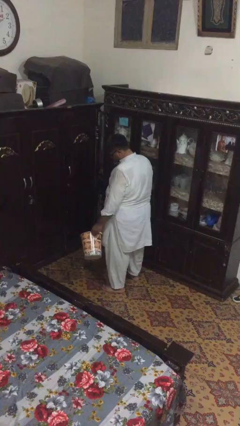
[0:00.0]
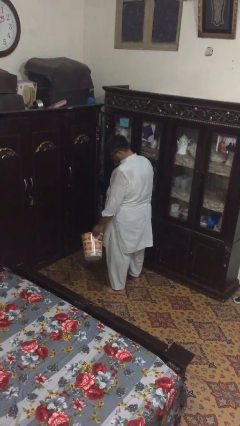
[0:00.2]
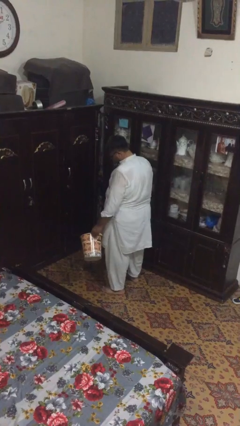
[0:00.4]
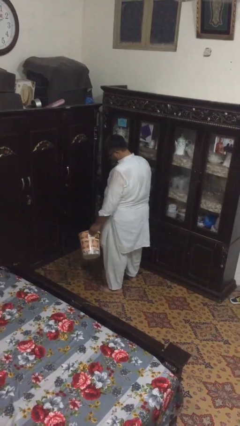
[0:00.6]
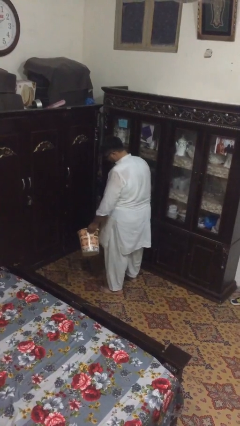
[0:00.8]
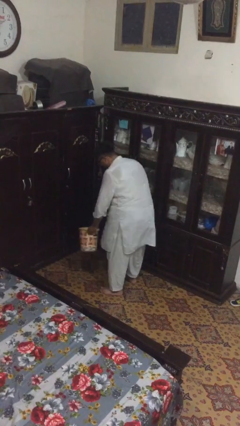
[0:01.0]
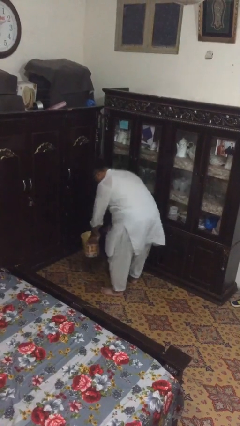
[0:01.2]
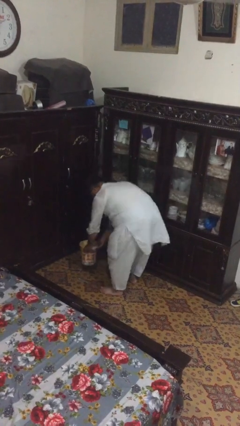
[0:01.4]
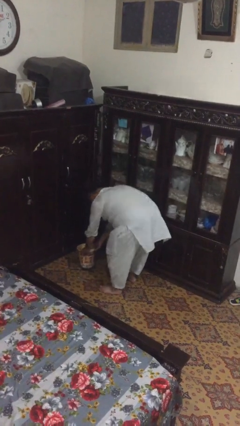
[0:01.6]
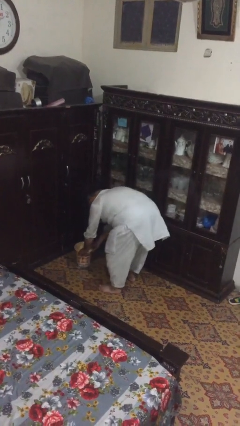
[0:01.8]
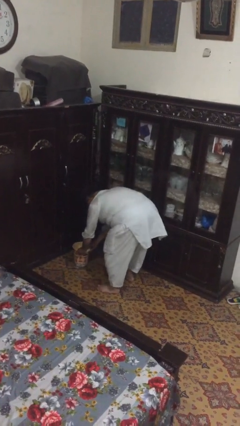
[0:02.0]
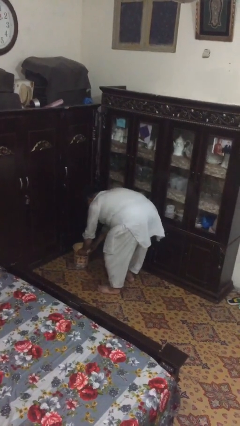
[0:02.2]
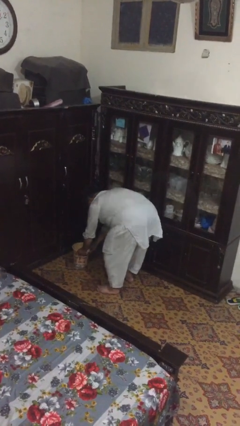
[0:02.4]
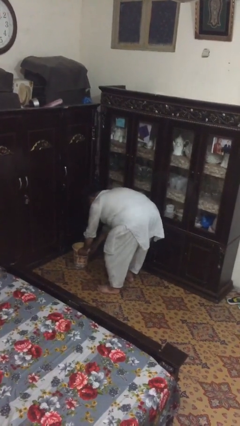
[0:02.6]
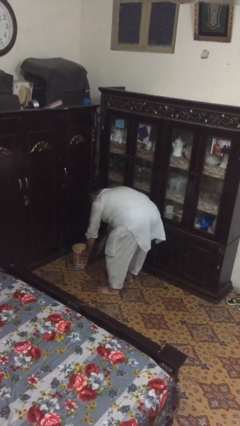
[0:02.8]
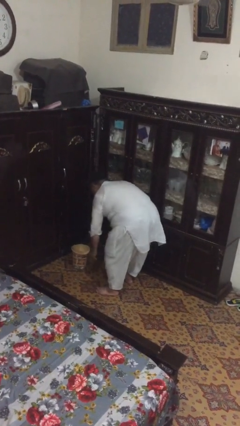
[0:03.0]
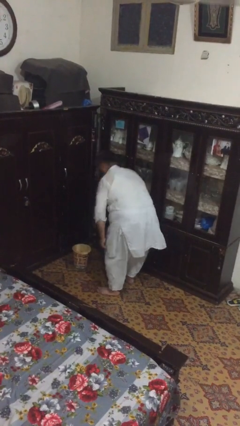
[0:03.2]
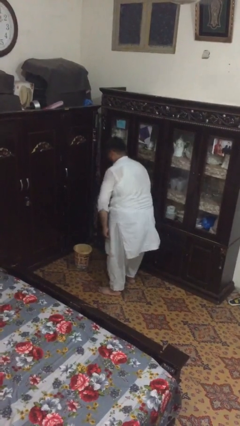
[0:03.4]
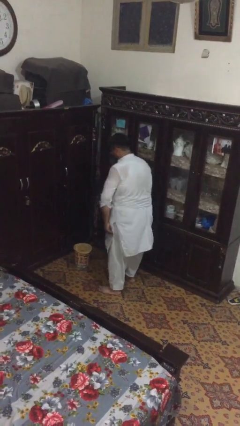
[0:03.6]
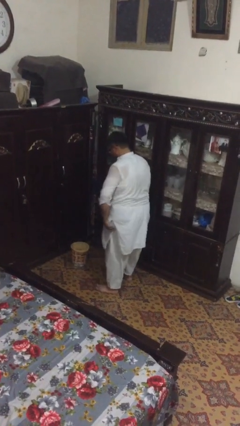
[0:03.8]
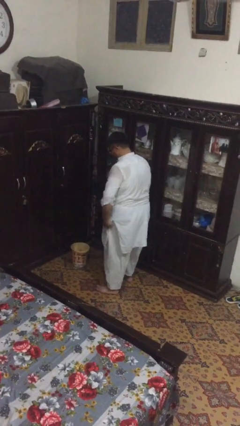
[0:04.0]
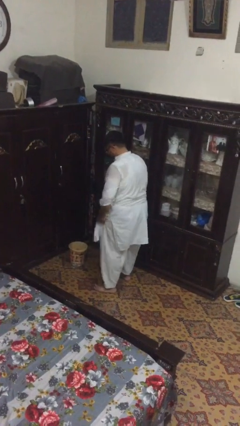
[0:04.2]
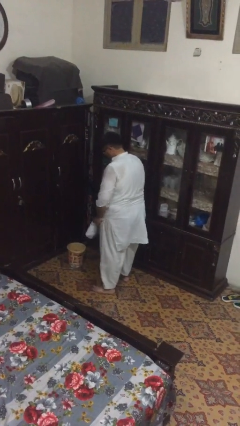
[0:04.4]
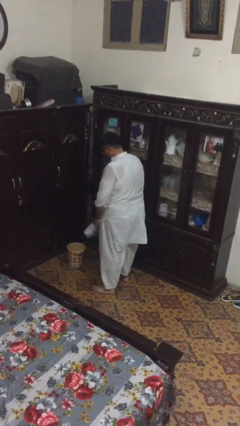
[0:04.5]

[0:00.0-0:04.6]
person puts down object on floor

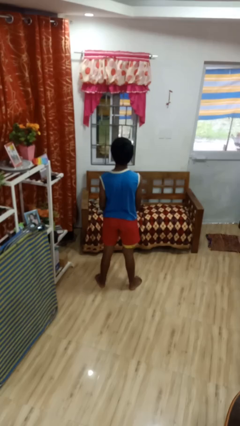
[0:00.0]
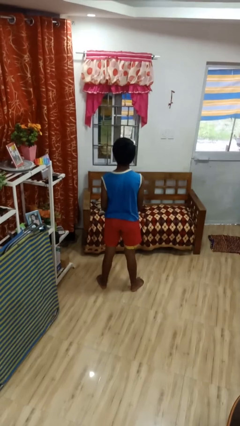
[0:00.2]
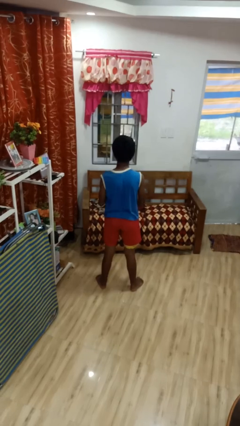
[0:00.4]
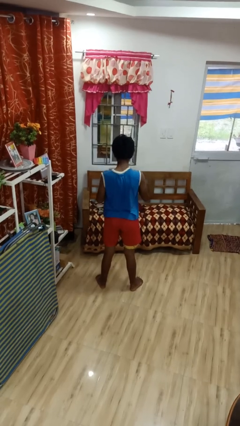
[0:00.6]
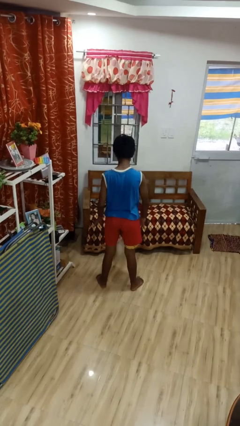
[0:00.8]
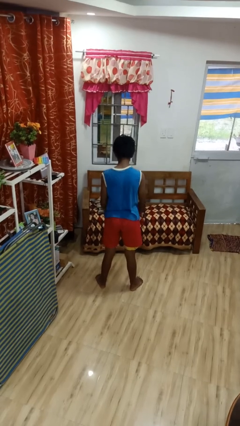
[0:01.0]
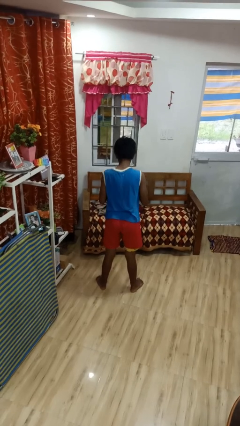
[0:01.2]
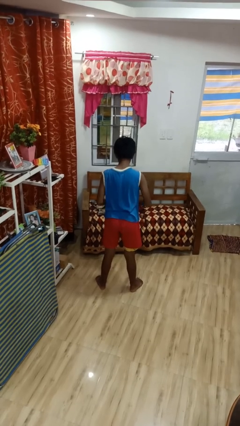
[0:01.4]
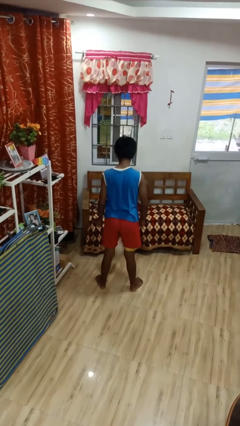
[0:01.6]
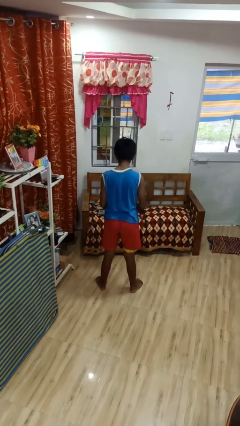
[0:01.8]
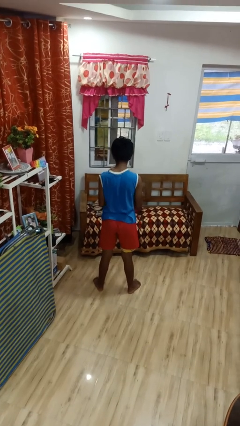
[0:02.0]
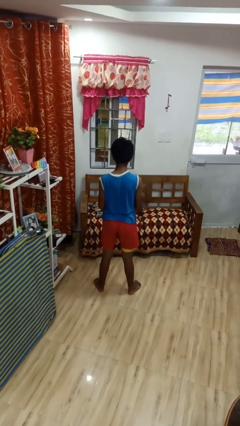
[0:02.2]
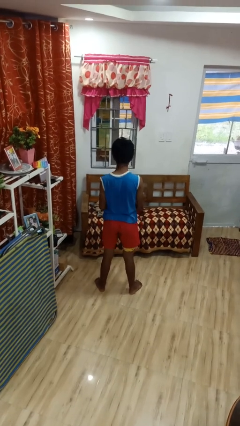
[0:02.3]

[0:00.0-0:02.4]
person bounces ball on floor

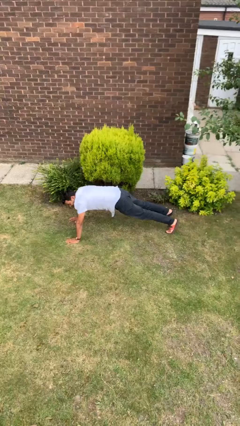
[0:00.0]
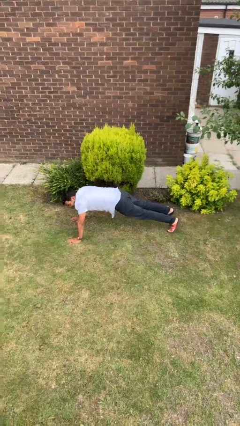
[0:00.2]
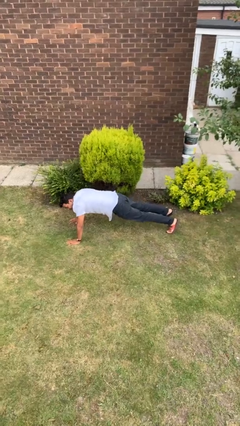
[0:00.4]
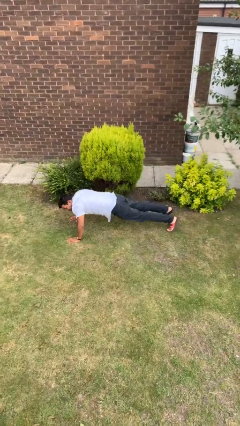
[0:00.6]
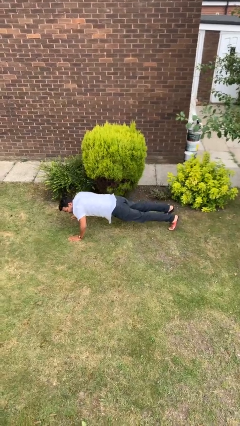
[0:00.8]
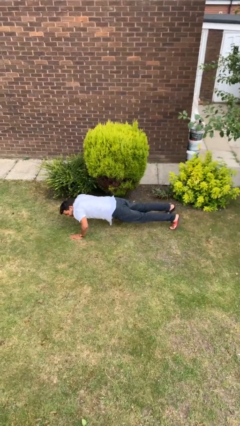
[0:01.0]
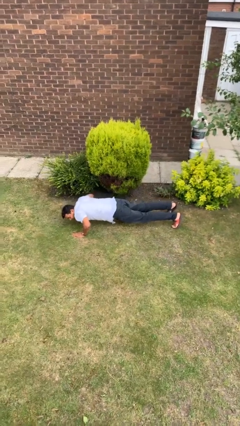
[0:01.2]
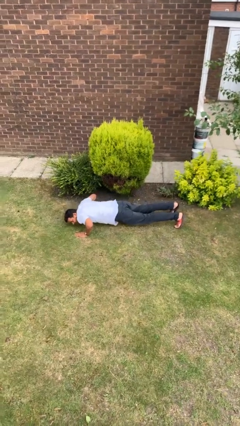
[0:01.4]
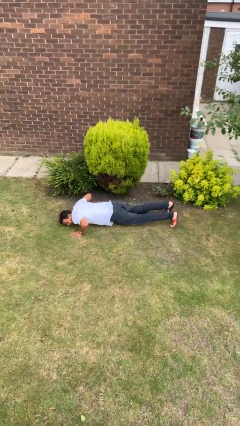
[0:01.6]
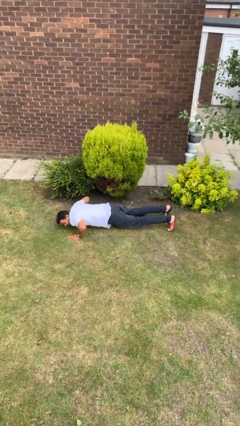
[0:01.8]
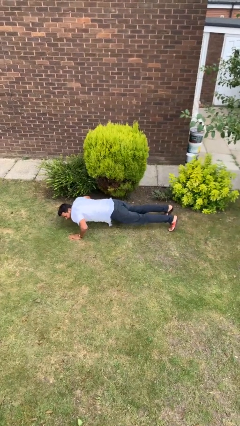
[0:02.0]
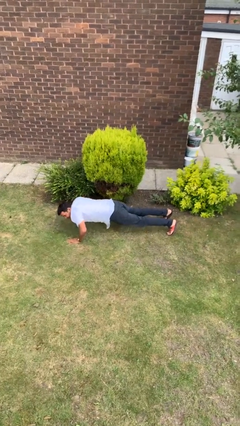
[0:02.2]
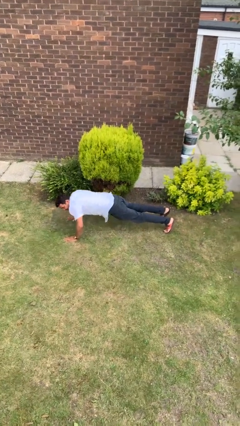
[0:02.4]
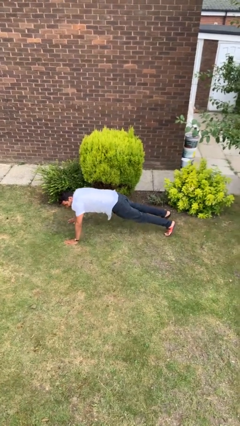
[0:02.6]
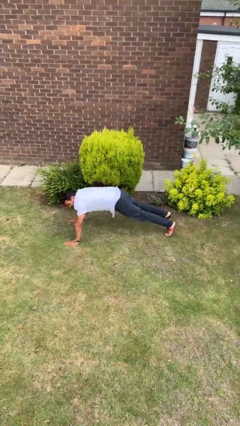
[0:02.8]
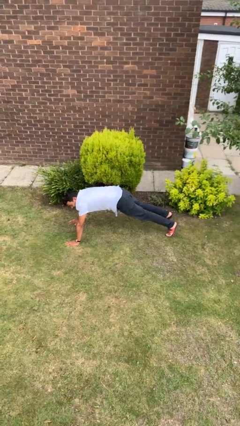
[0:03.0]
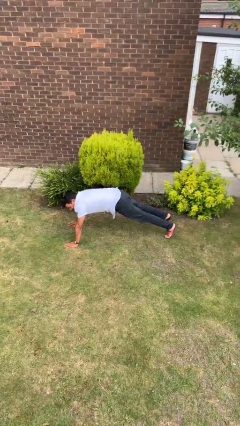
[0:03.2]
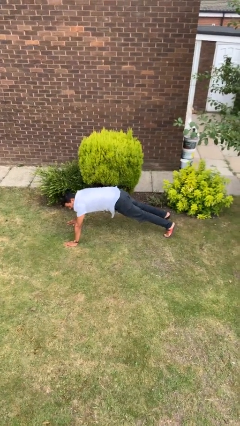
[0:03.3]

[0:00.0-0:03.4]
person exercises with pushup

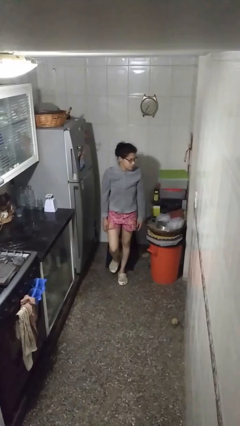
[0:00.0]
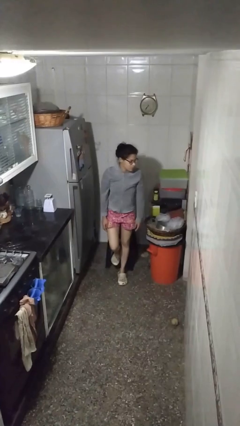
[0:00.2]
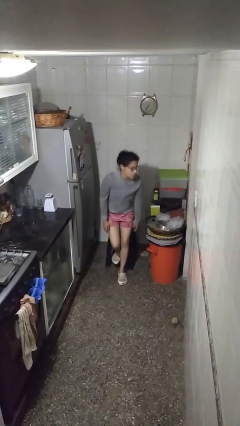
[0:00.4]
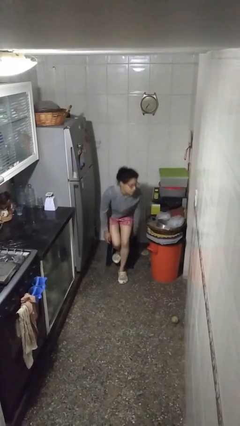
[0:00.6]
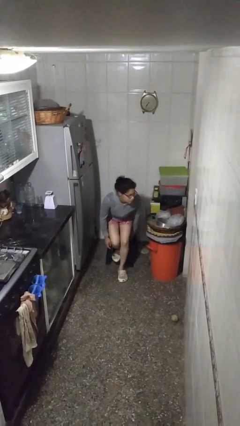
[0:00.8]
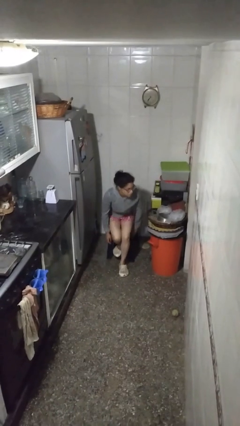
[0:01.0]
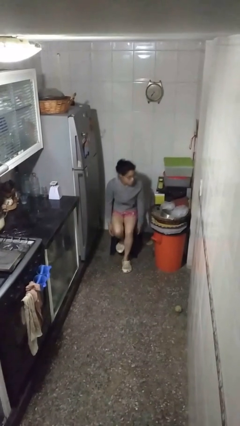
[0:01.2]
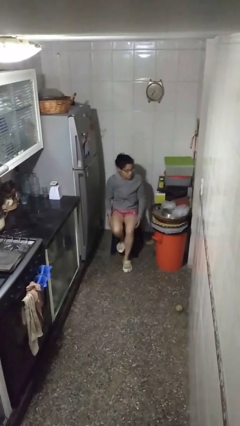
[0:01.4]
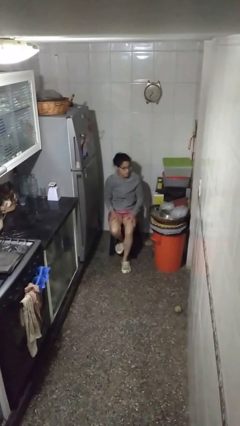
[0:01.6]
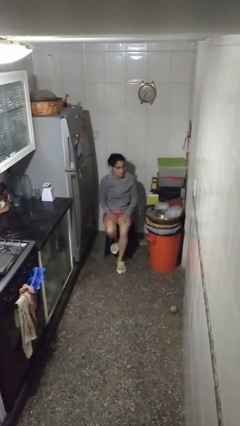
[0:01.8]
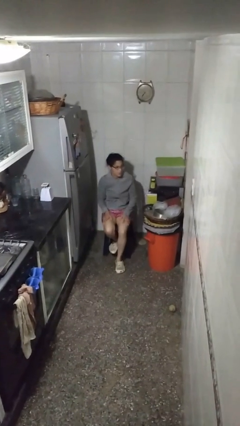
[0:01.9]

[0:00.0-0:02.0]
person sits down

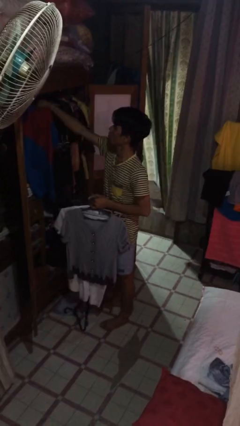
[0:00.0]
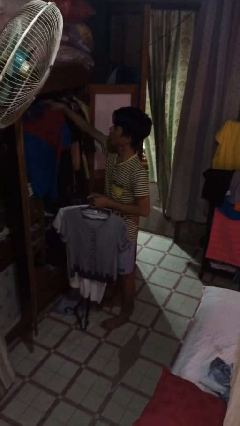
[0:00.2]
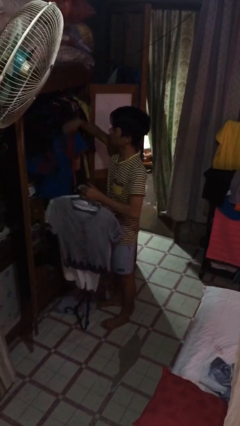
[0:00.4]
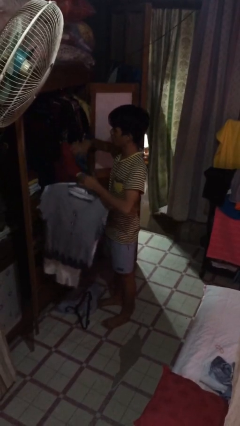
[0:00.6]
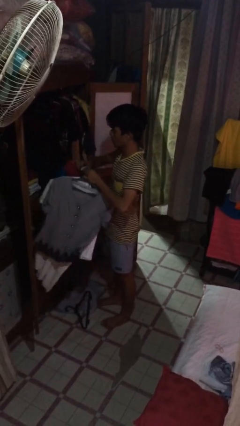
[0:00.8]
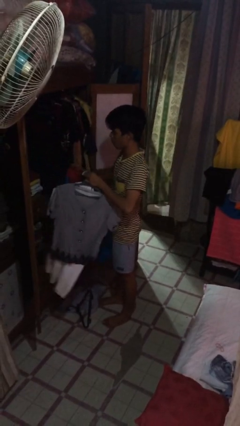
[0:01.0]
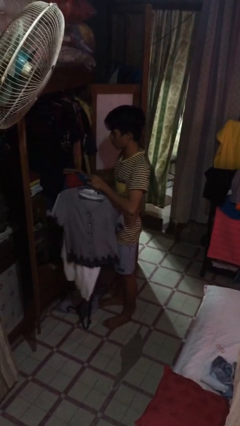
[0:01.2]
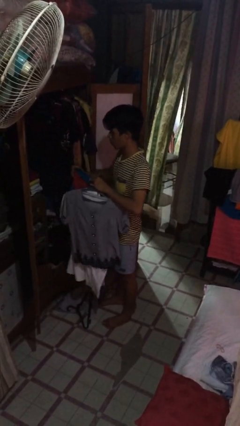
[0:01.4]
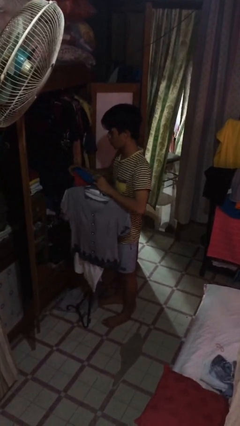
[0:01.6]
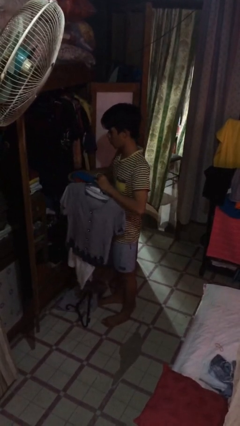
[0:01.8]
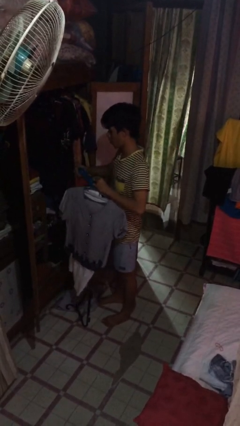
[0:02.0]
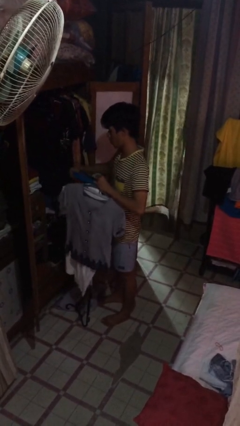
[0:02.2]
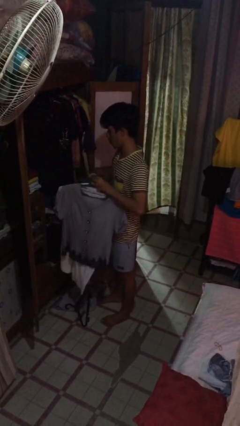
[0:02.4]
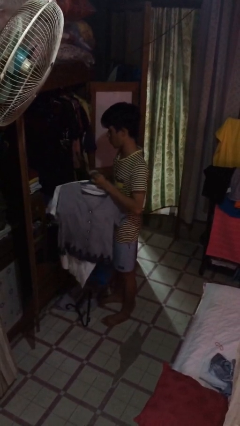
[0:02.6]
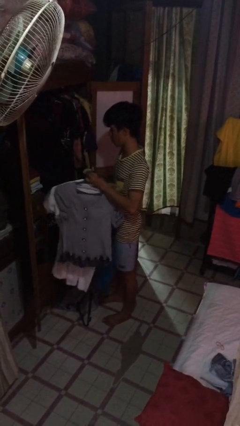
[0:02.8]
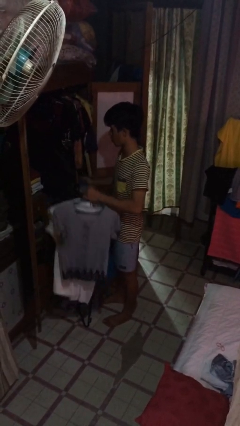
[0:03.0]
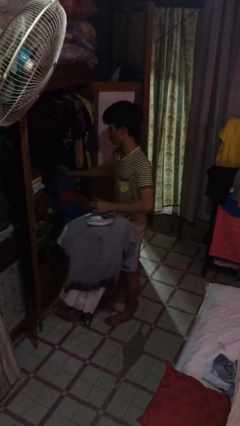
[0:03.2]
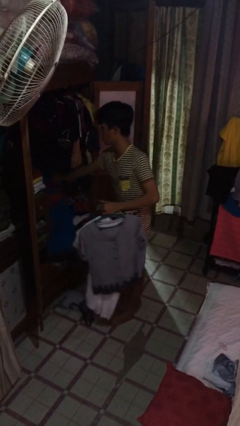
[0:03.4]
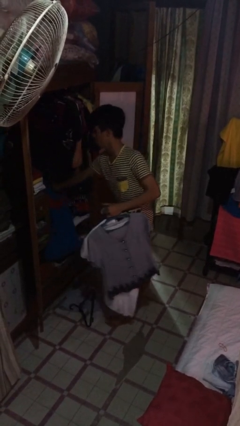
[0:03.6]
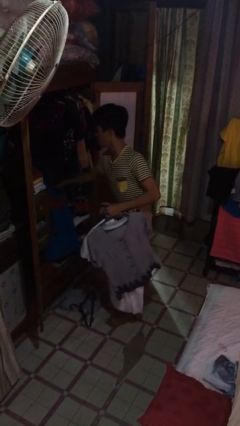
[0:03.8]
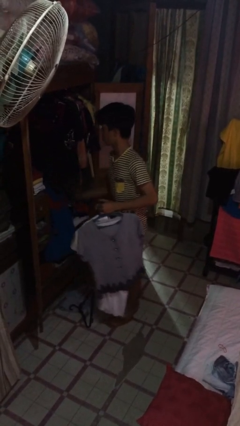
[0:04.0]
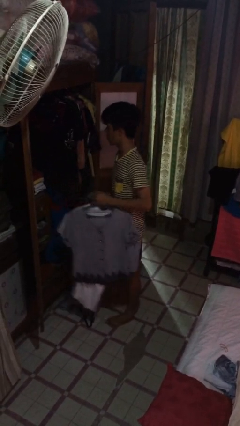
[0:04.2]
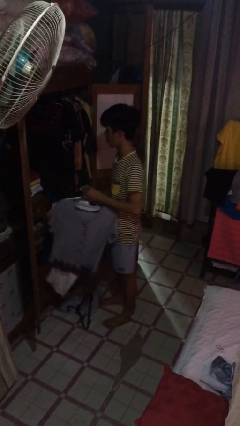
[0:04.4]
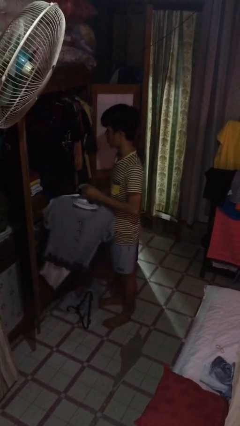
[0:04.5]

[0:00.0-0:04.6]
person takes clothes from closet

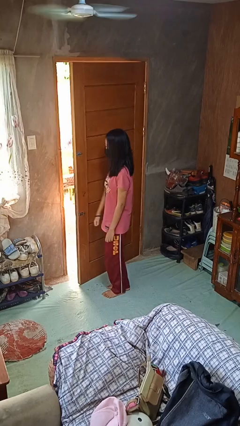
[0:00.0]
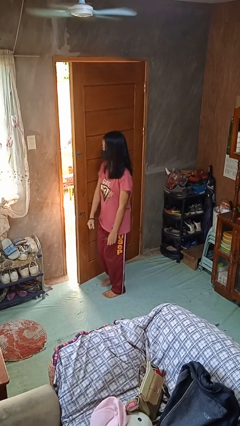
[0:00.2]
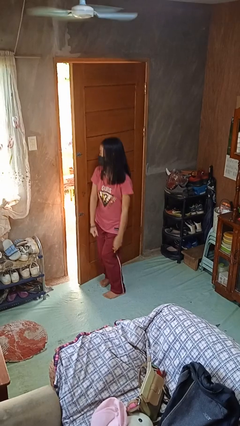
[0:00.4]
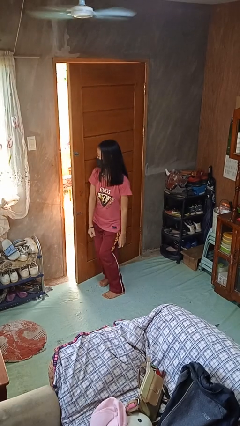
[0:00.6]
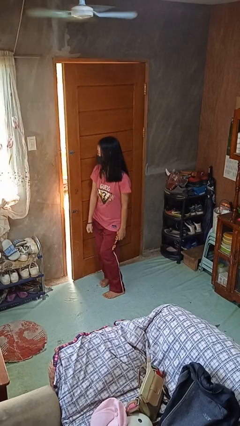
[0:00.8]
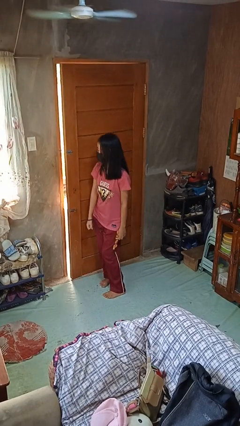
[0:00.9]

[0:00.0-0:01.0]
person closes door with hip
